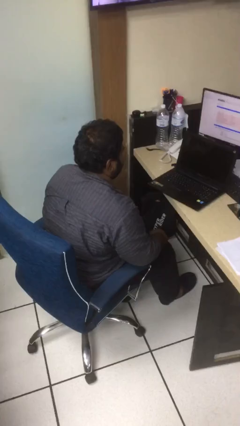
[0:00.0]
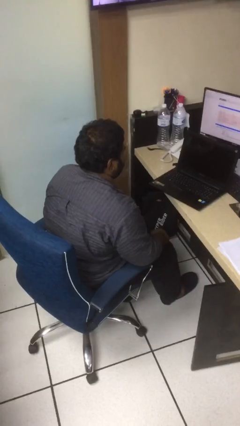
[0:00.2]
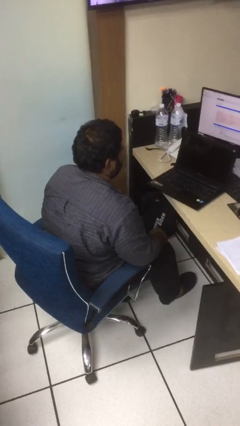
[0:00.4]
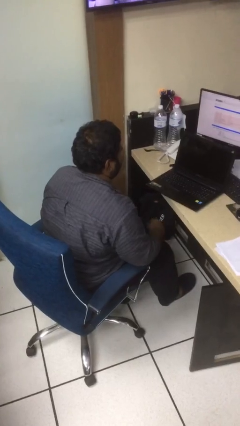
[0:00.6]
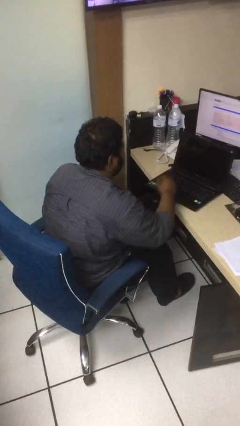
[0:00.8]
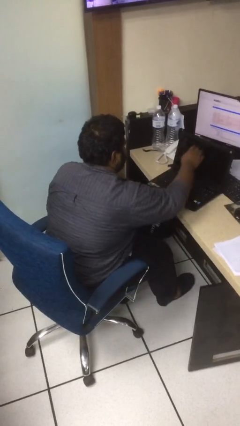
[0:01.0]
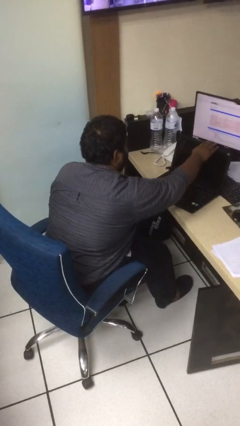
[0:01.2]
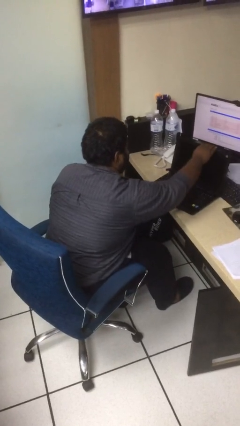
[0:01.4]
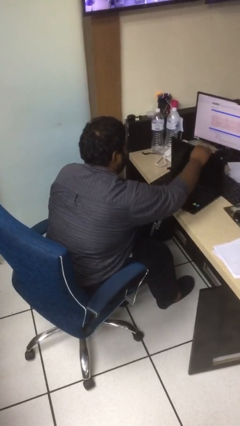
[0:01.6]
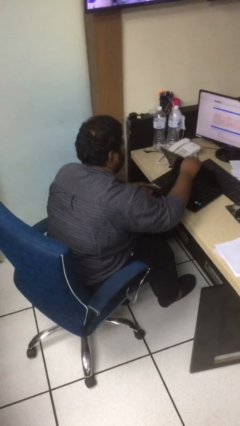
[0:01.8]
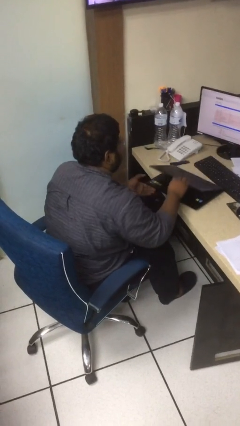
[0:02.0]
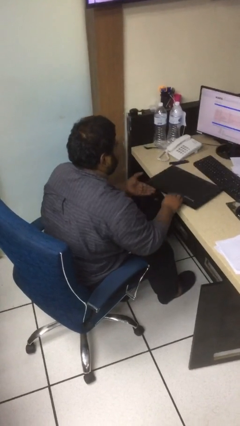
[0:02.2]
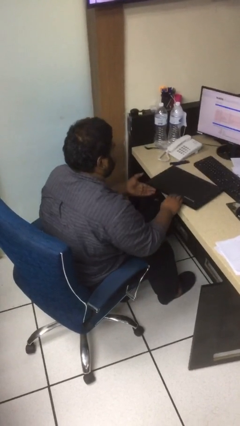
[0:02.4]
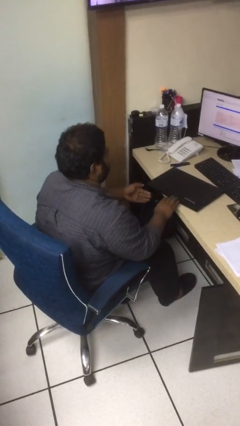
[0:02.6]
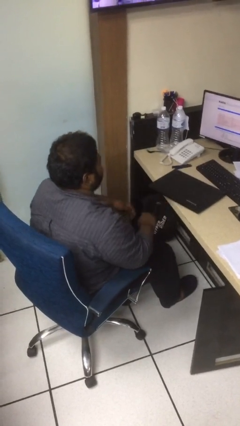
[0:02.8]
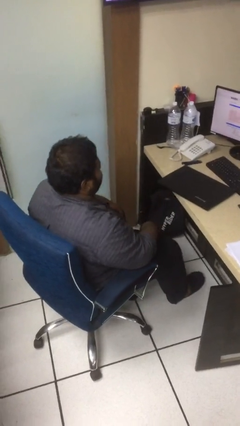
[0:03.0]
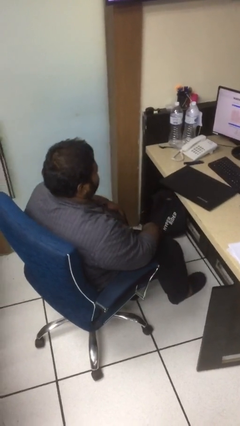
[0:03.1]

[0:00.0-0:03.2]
person closes laptop

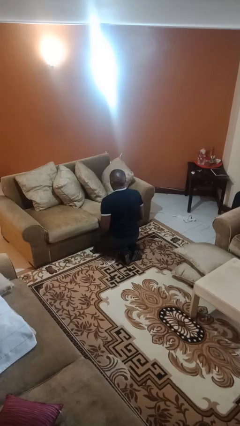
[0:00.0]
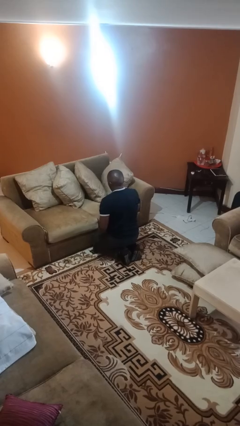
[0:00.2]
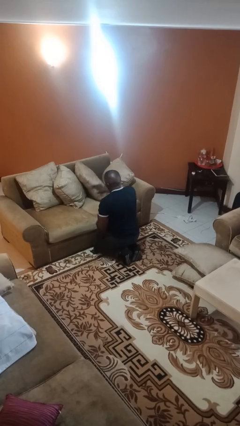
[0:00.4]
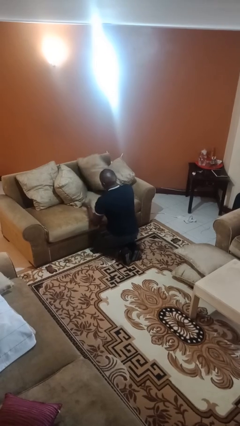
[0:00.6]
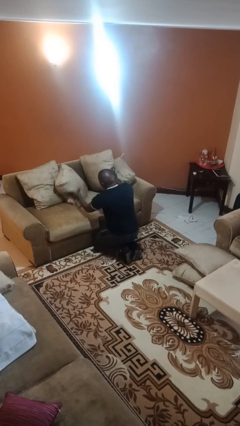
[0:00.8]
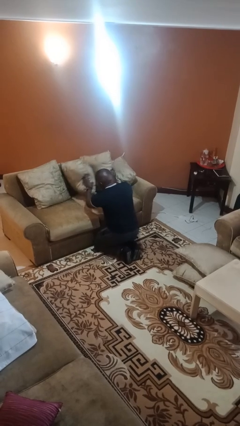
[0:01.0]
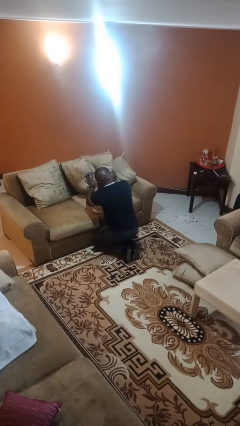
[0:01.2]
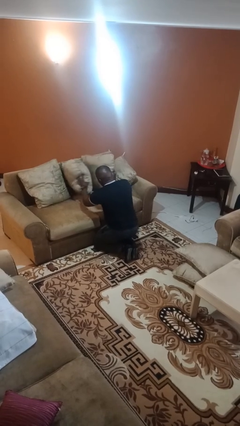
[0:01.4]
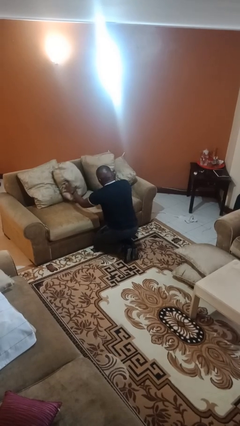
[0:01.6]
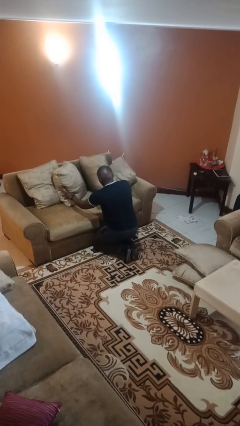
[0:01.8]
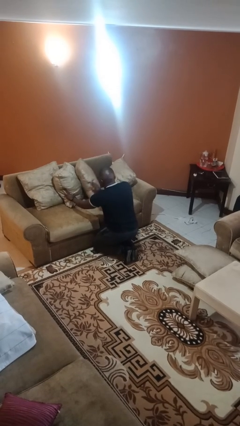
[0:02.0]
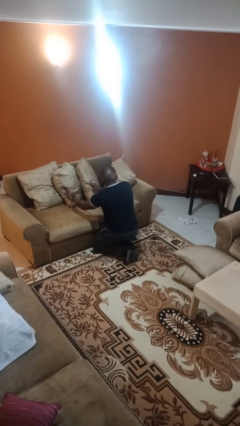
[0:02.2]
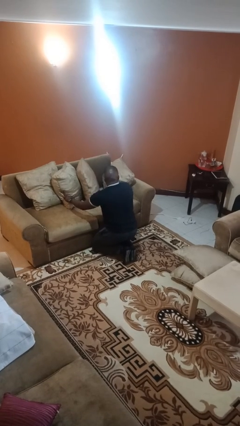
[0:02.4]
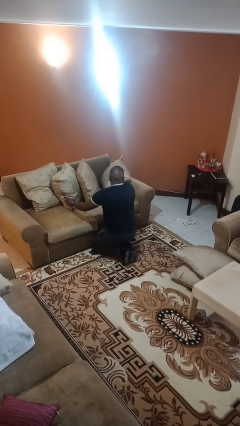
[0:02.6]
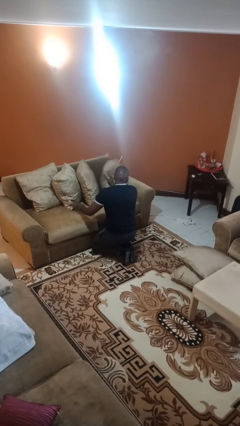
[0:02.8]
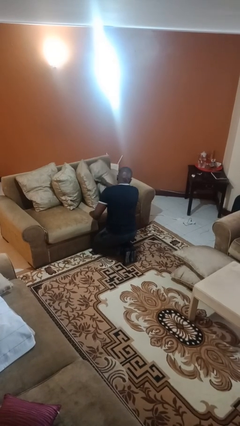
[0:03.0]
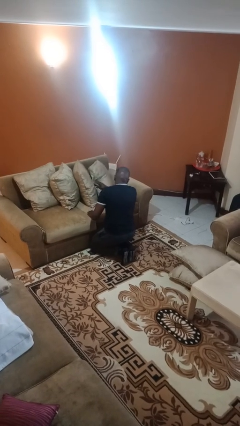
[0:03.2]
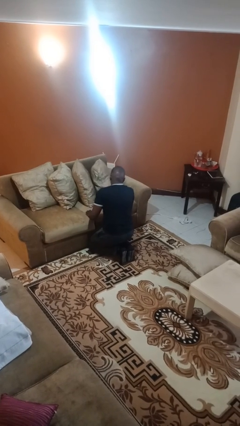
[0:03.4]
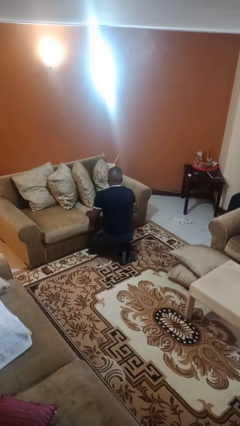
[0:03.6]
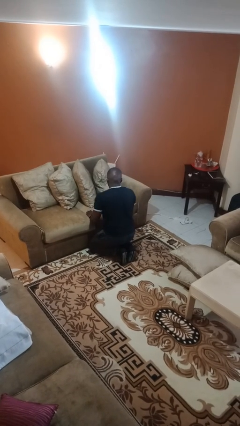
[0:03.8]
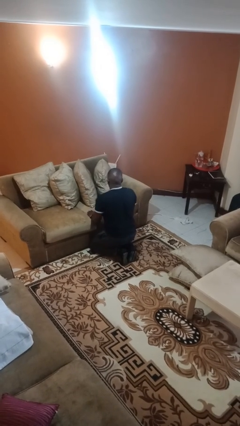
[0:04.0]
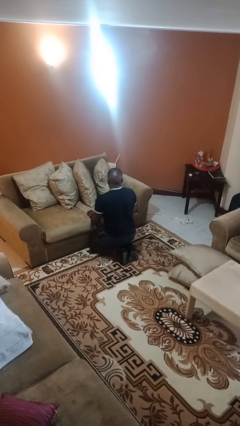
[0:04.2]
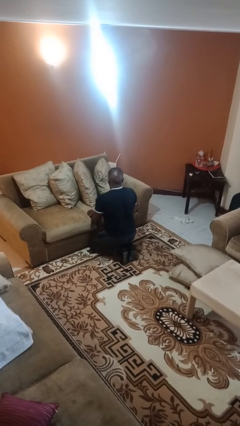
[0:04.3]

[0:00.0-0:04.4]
person searches in couch

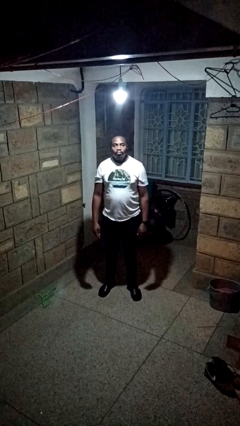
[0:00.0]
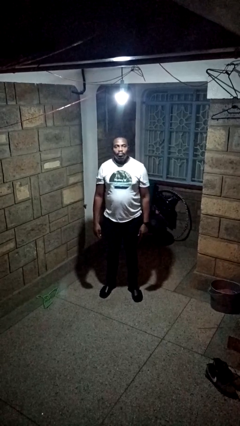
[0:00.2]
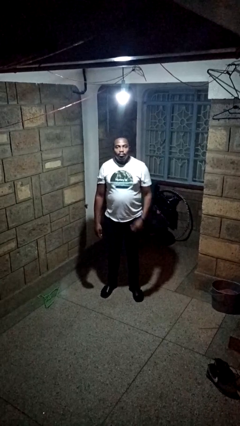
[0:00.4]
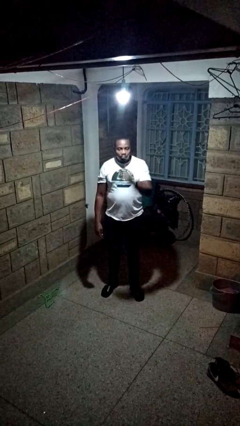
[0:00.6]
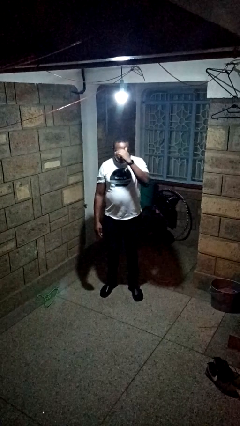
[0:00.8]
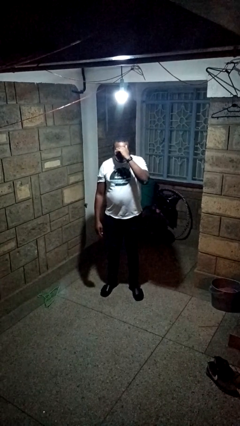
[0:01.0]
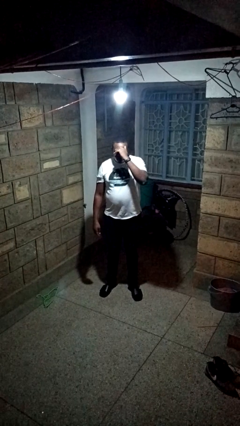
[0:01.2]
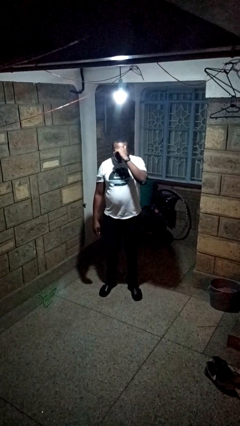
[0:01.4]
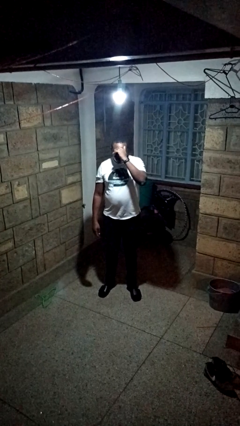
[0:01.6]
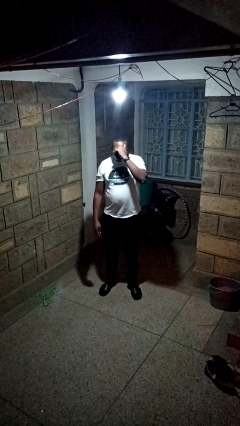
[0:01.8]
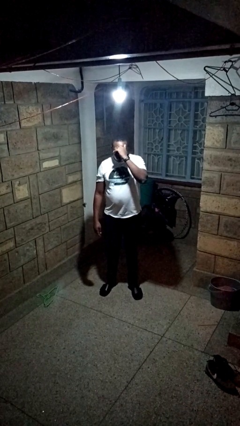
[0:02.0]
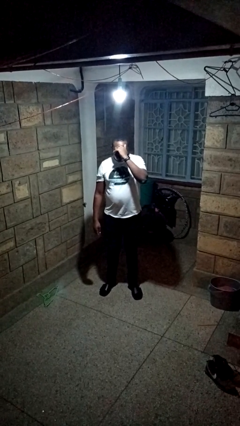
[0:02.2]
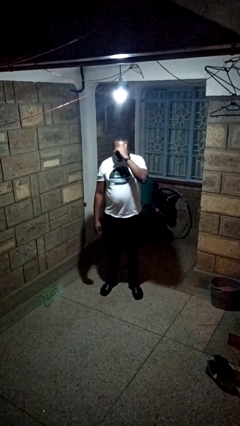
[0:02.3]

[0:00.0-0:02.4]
person shades eyes

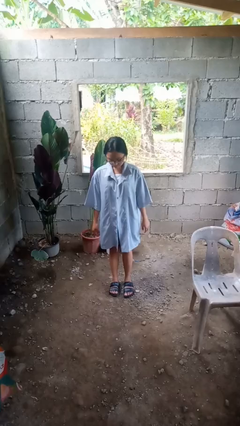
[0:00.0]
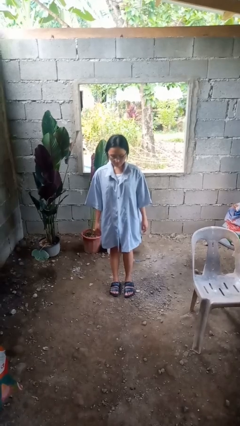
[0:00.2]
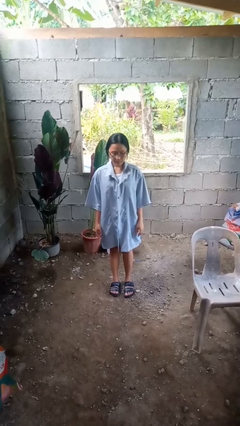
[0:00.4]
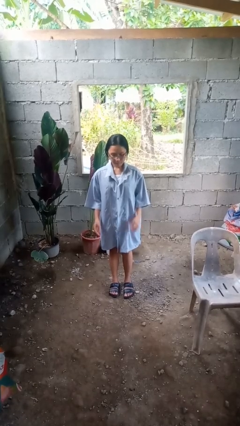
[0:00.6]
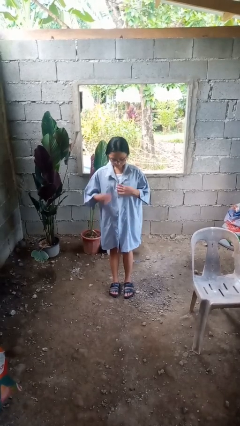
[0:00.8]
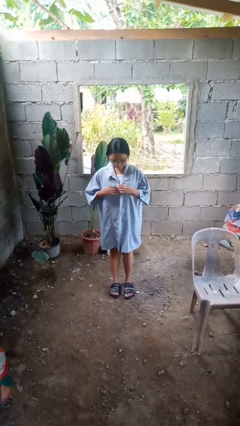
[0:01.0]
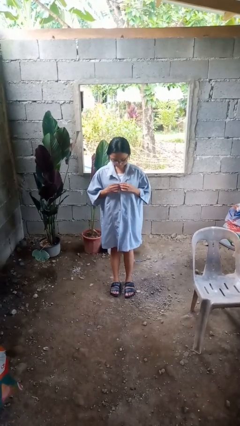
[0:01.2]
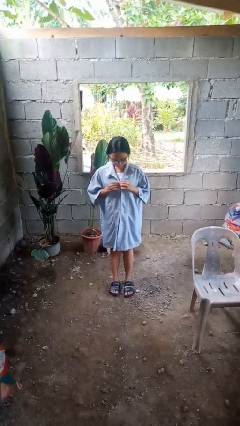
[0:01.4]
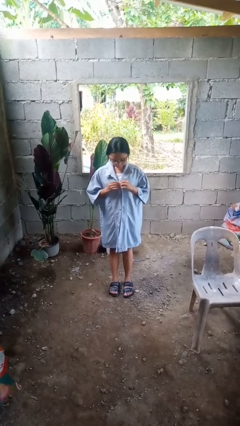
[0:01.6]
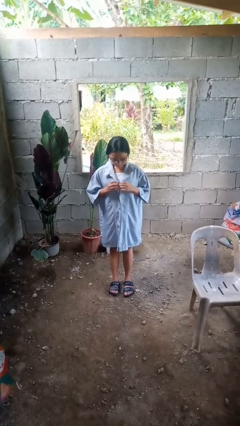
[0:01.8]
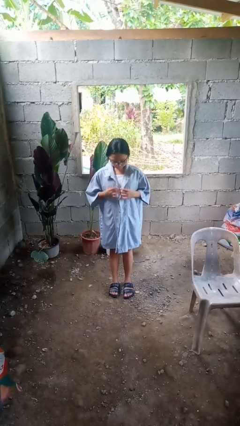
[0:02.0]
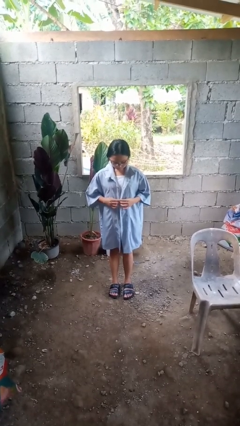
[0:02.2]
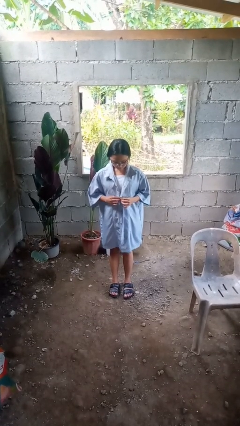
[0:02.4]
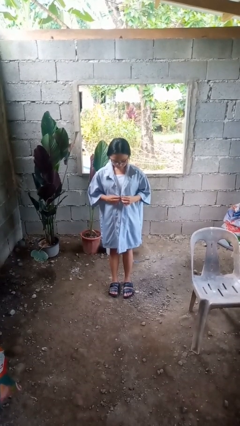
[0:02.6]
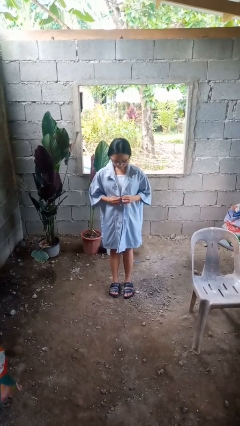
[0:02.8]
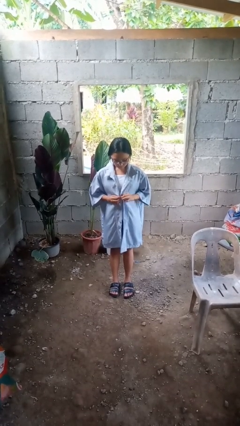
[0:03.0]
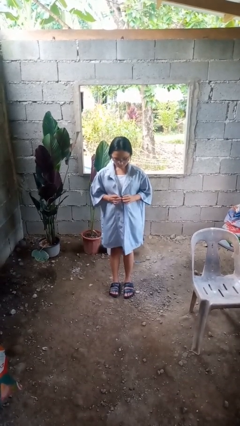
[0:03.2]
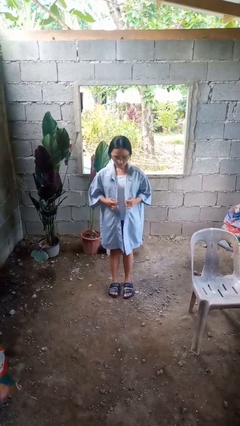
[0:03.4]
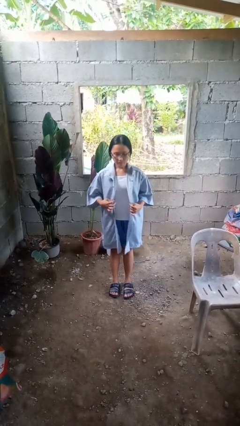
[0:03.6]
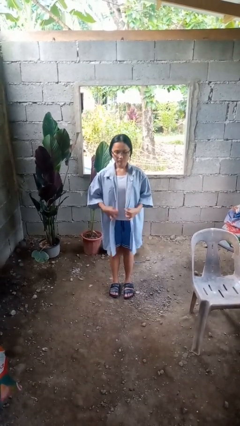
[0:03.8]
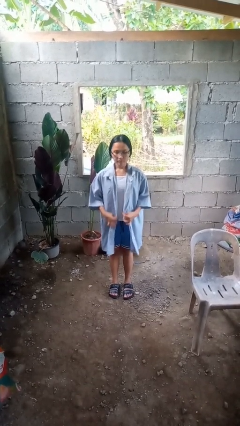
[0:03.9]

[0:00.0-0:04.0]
person unbuttons shirt

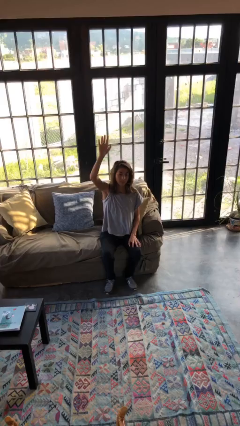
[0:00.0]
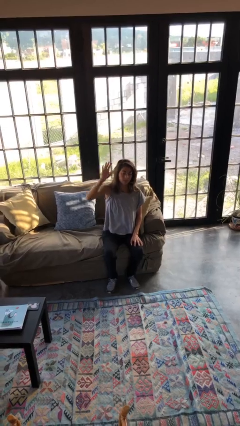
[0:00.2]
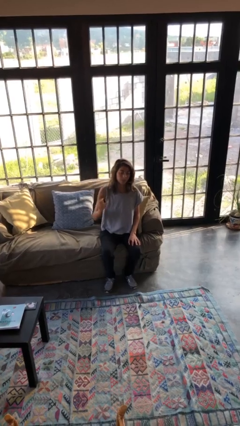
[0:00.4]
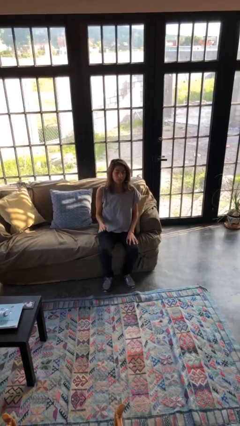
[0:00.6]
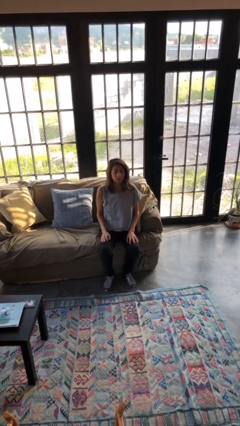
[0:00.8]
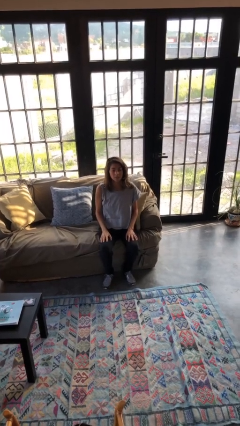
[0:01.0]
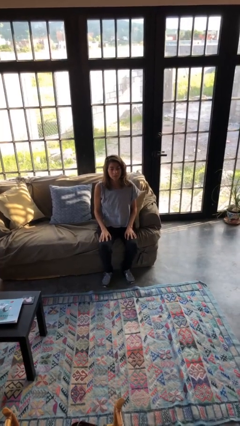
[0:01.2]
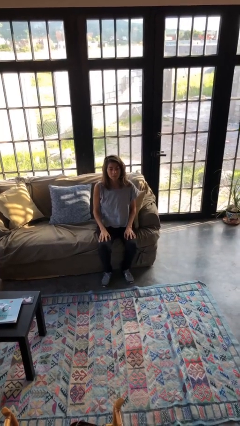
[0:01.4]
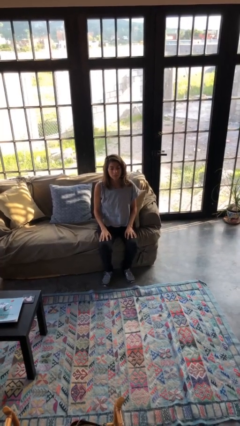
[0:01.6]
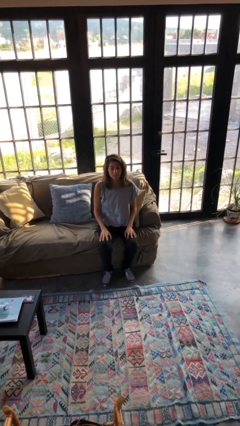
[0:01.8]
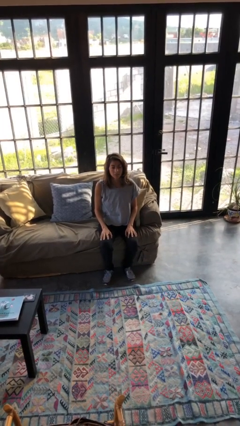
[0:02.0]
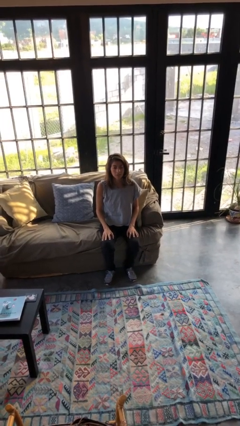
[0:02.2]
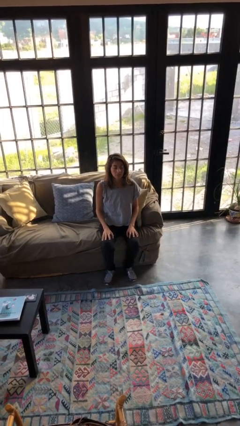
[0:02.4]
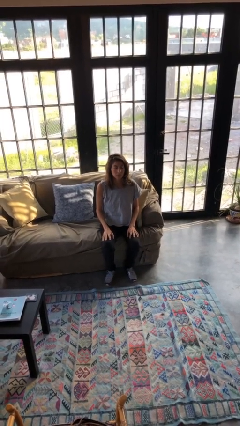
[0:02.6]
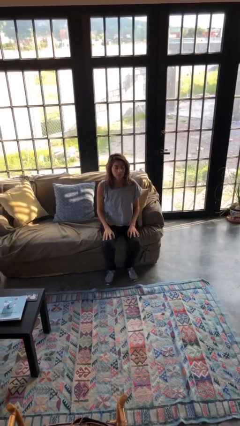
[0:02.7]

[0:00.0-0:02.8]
person gestures lower hand

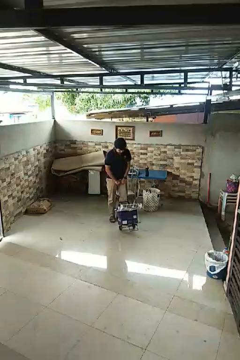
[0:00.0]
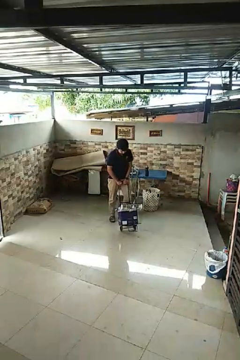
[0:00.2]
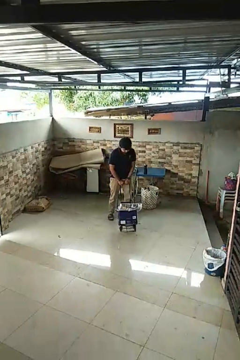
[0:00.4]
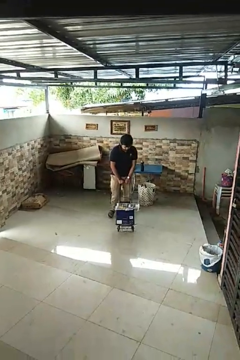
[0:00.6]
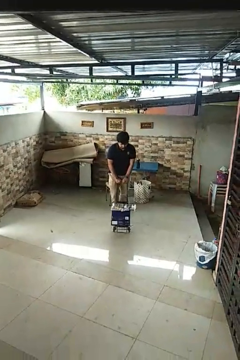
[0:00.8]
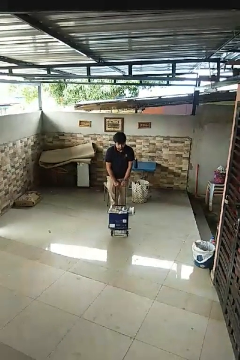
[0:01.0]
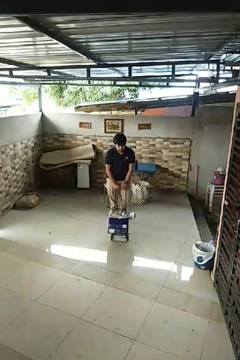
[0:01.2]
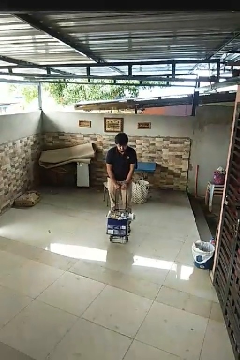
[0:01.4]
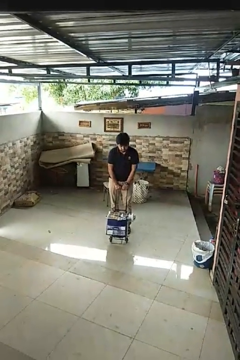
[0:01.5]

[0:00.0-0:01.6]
person pushes wheeled cart
